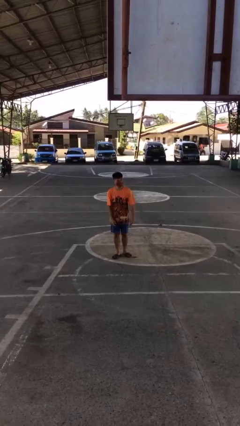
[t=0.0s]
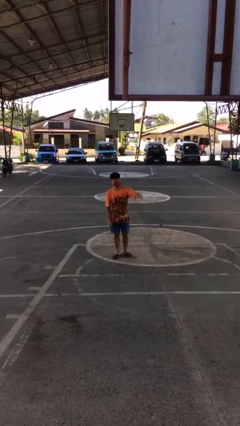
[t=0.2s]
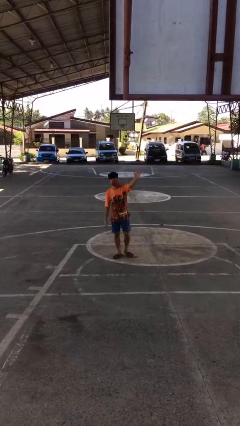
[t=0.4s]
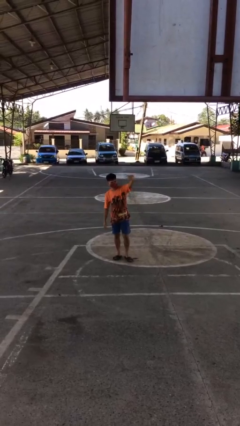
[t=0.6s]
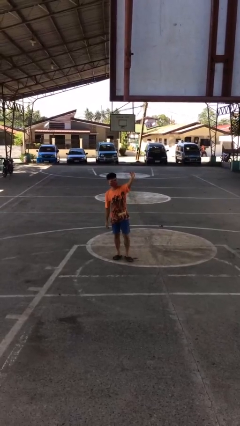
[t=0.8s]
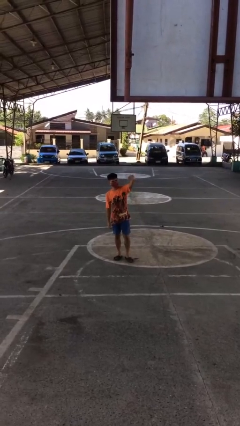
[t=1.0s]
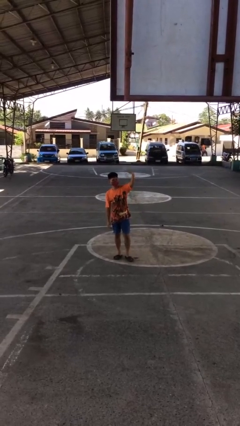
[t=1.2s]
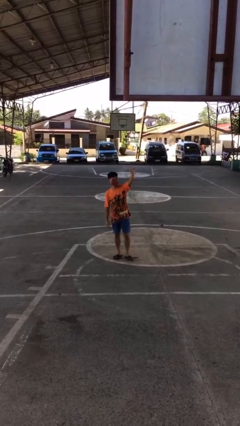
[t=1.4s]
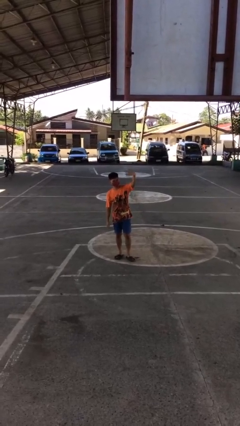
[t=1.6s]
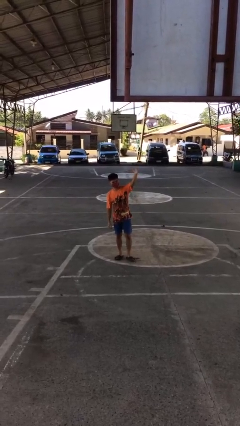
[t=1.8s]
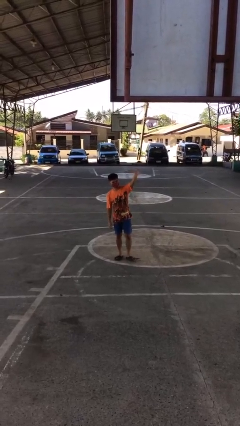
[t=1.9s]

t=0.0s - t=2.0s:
person gestures come here

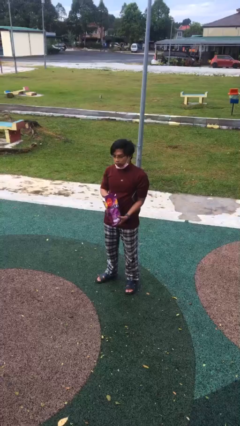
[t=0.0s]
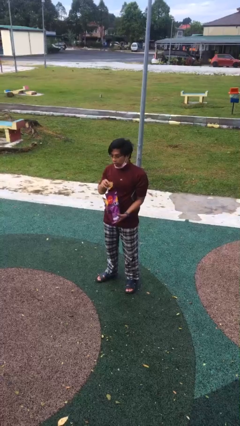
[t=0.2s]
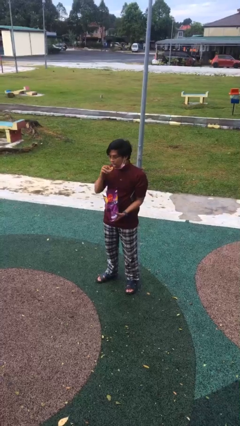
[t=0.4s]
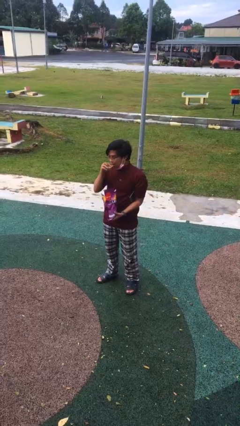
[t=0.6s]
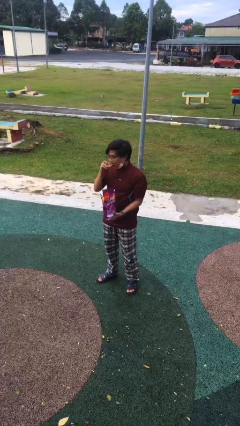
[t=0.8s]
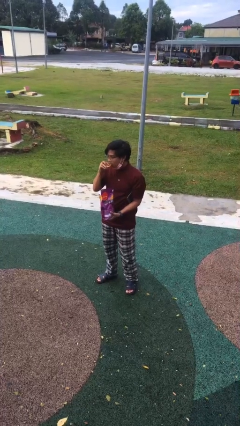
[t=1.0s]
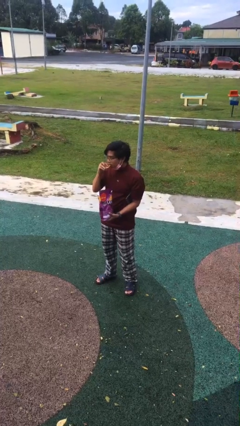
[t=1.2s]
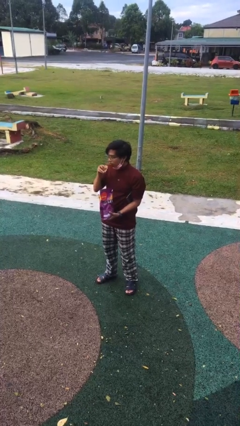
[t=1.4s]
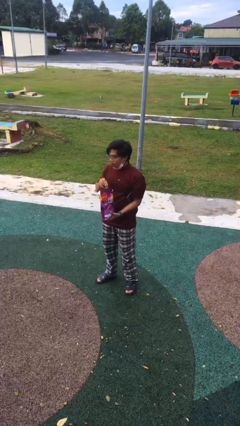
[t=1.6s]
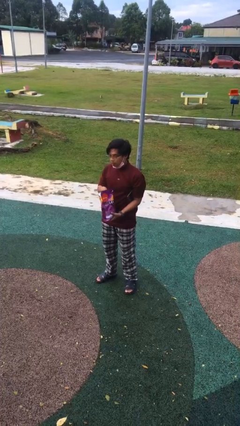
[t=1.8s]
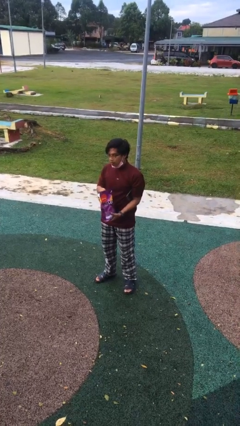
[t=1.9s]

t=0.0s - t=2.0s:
person eats snack from bag

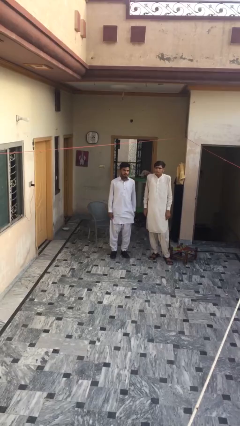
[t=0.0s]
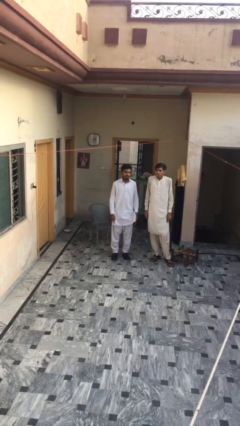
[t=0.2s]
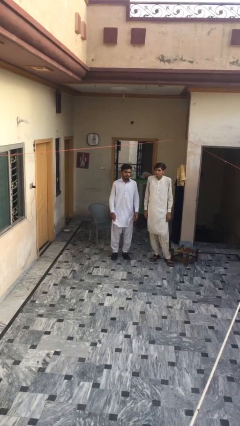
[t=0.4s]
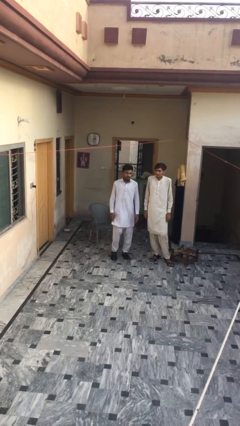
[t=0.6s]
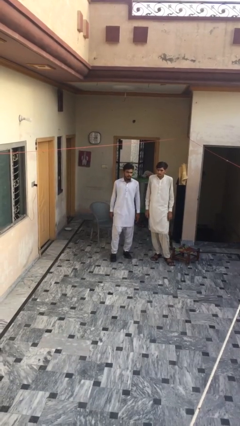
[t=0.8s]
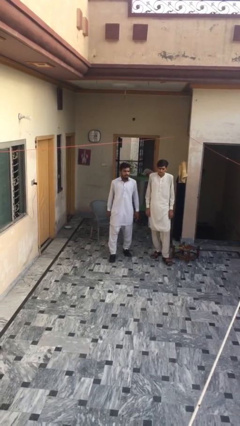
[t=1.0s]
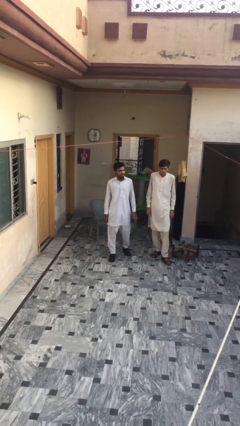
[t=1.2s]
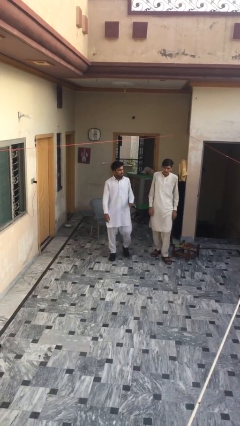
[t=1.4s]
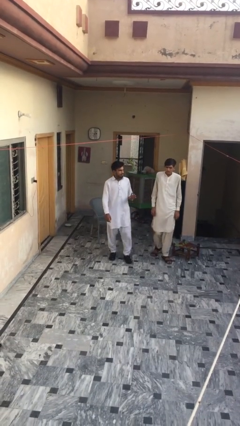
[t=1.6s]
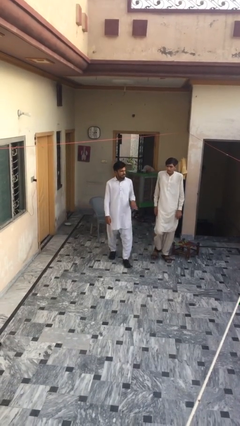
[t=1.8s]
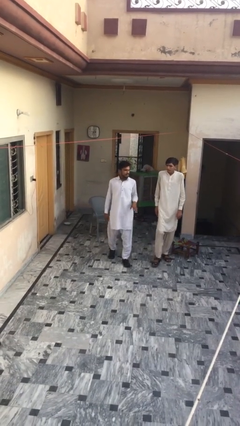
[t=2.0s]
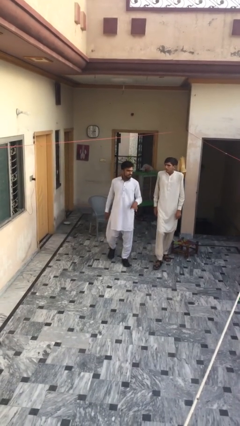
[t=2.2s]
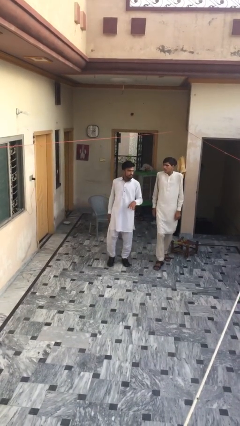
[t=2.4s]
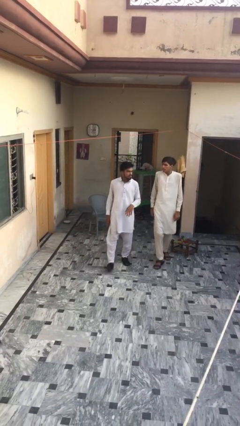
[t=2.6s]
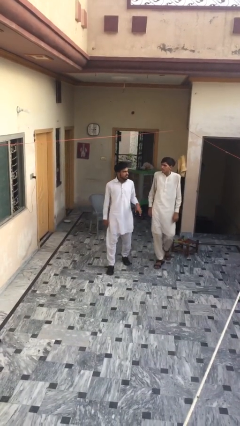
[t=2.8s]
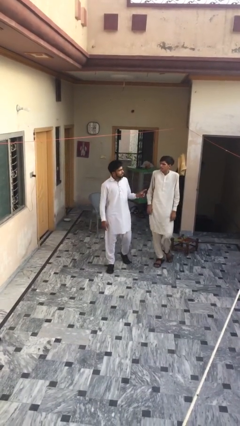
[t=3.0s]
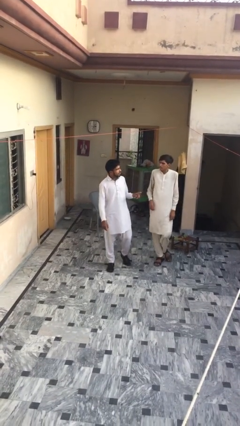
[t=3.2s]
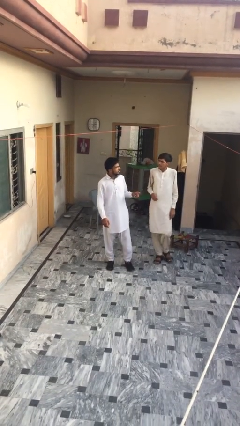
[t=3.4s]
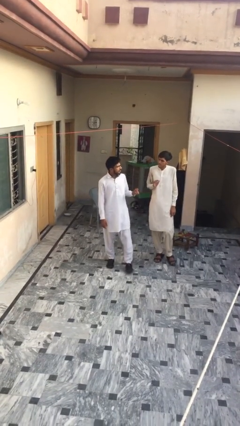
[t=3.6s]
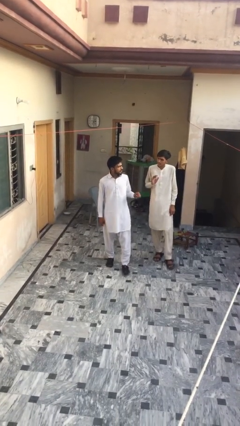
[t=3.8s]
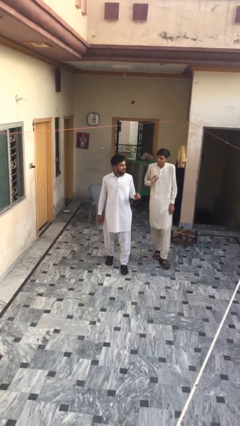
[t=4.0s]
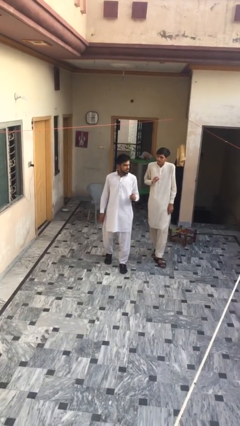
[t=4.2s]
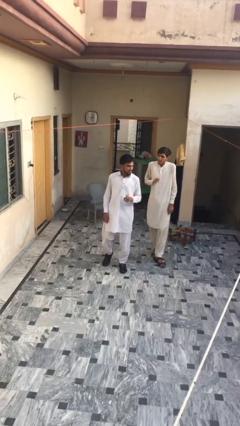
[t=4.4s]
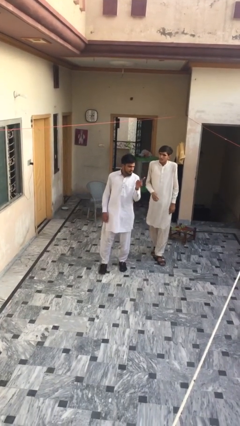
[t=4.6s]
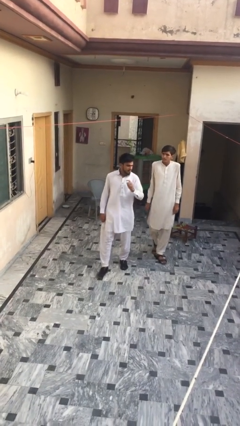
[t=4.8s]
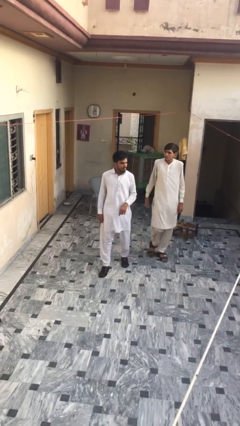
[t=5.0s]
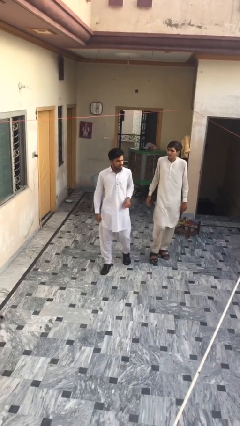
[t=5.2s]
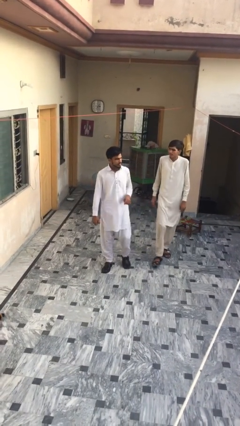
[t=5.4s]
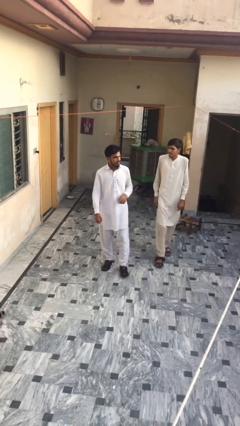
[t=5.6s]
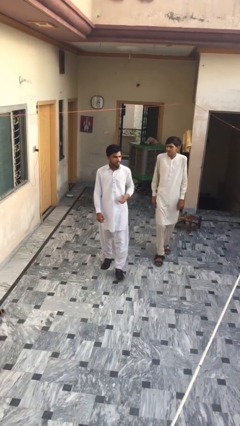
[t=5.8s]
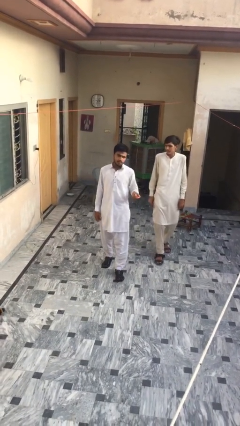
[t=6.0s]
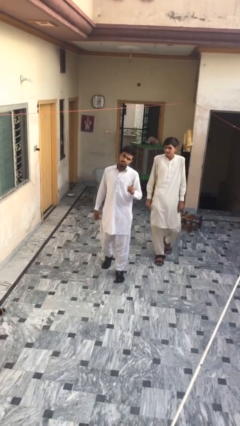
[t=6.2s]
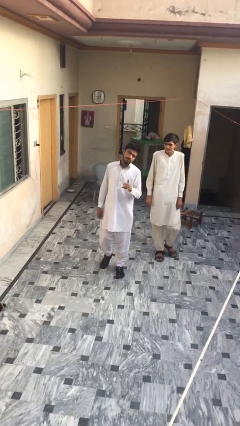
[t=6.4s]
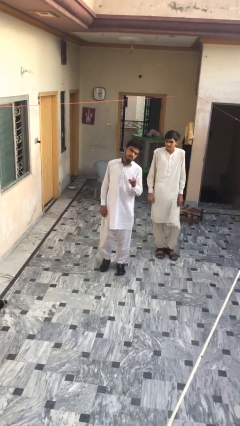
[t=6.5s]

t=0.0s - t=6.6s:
person talks to person

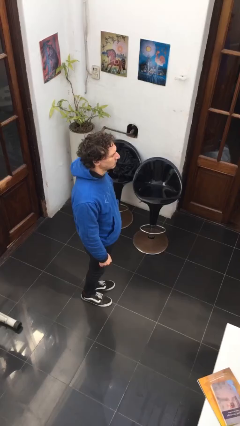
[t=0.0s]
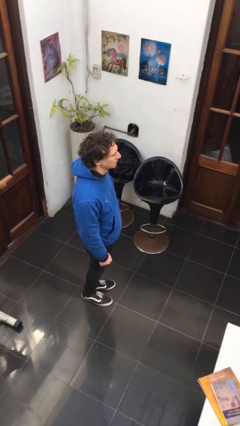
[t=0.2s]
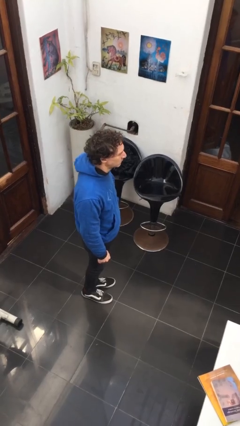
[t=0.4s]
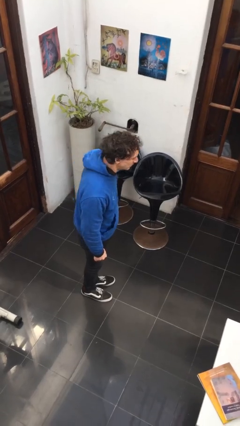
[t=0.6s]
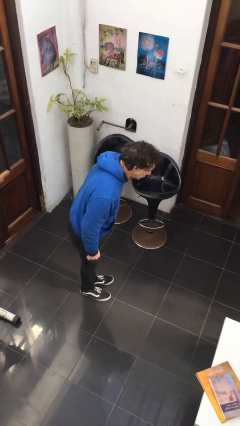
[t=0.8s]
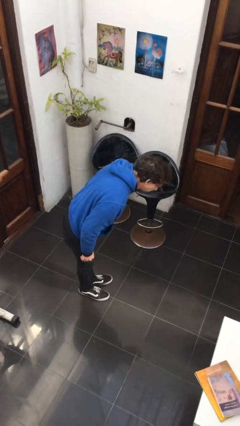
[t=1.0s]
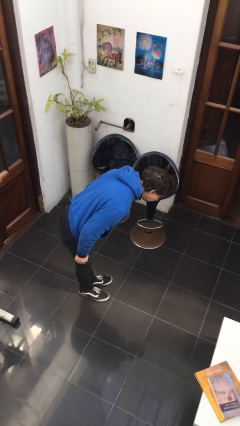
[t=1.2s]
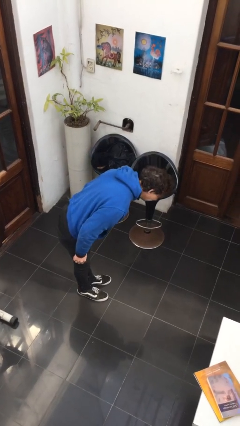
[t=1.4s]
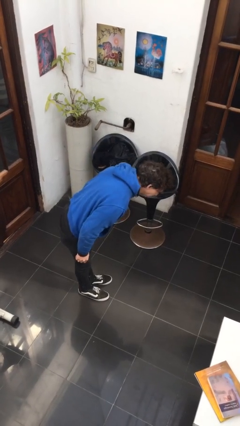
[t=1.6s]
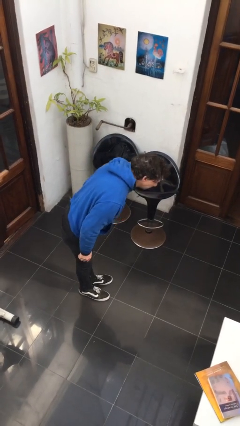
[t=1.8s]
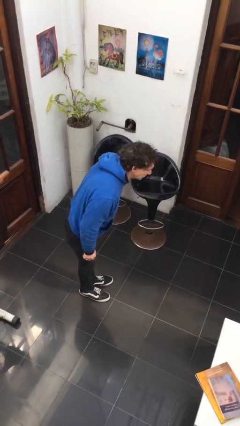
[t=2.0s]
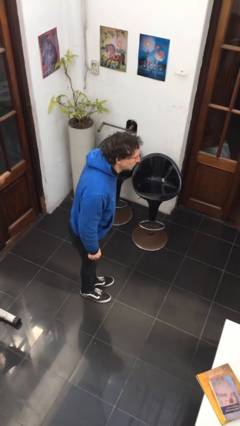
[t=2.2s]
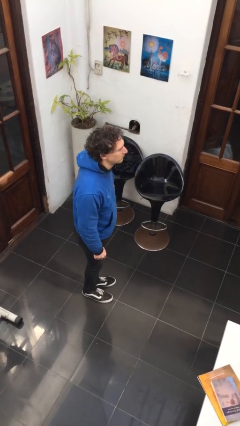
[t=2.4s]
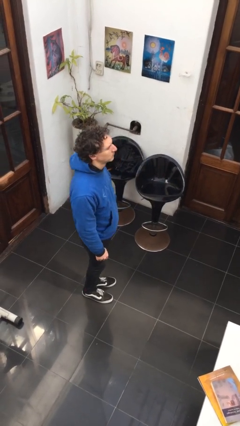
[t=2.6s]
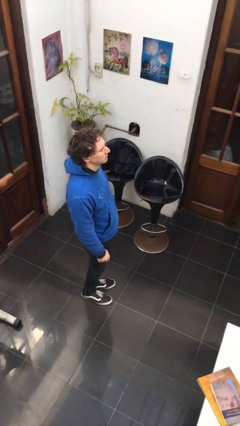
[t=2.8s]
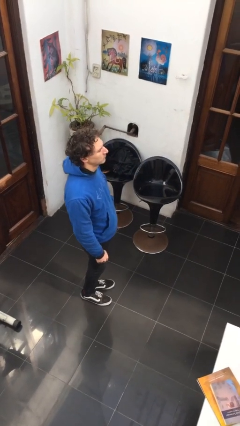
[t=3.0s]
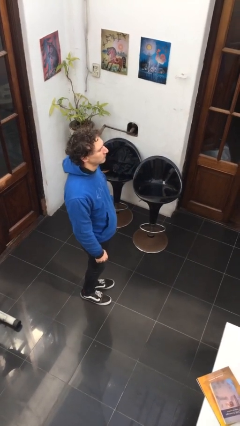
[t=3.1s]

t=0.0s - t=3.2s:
person bows

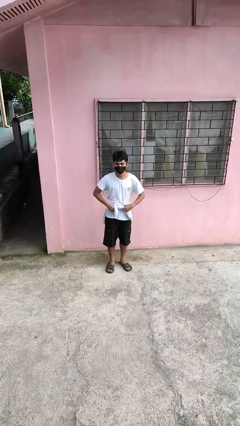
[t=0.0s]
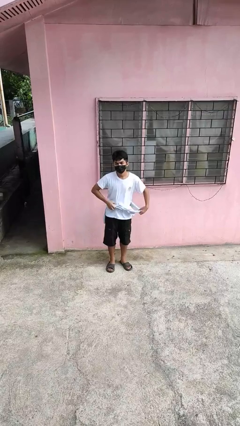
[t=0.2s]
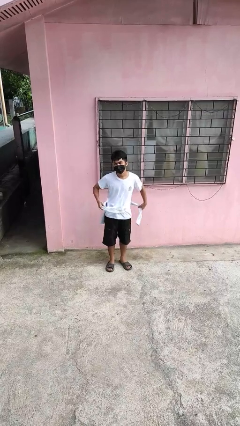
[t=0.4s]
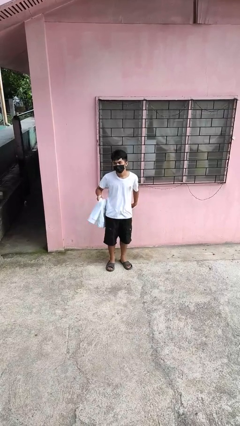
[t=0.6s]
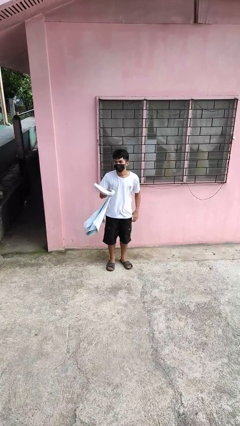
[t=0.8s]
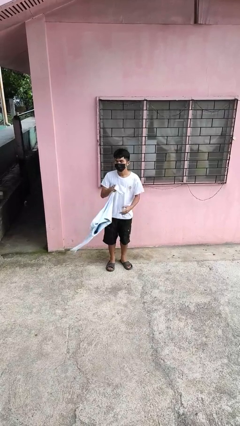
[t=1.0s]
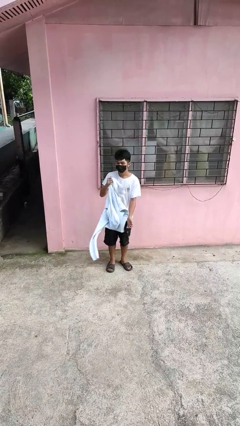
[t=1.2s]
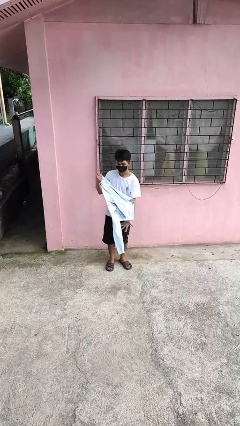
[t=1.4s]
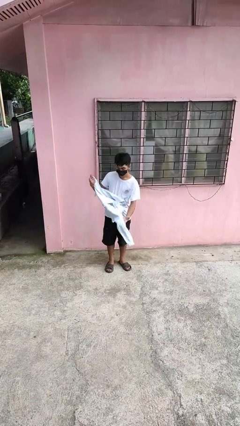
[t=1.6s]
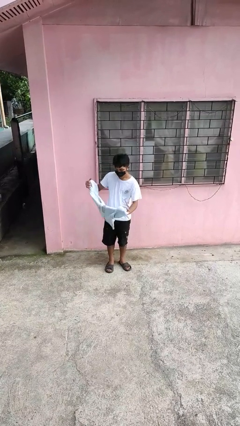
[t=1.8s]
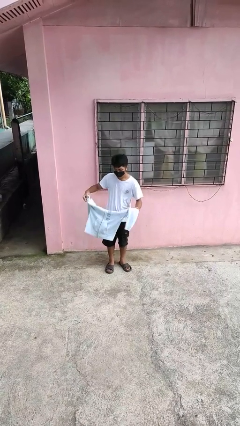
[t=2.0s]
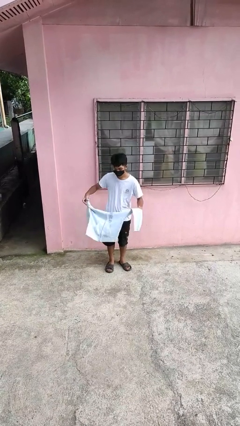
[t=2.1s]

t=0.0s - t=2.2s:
person unties jacket around waist

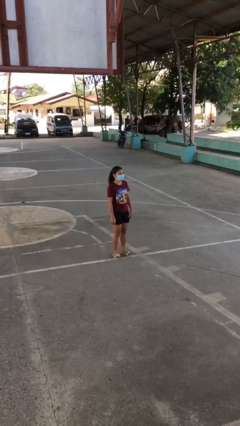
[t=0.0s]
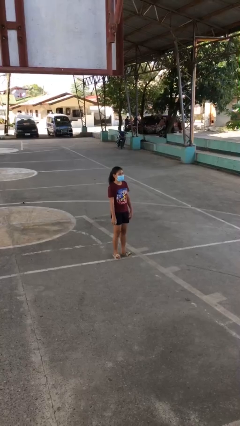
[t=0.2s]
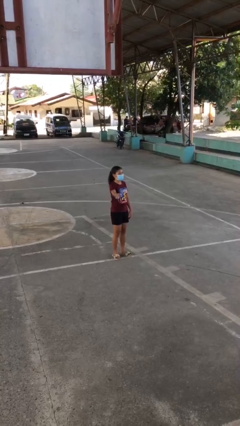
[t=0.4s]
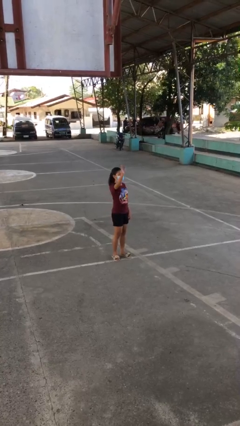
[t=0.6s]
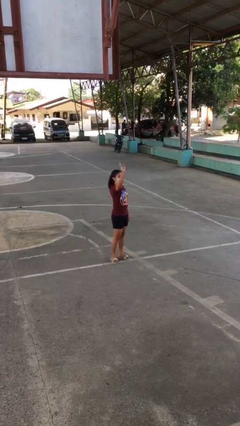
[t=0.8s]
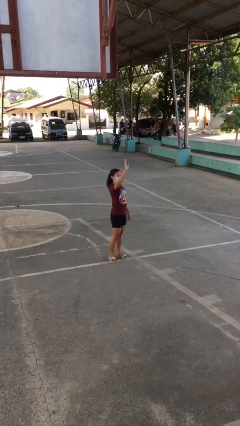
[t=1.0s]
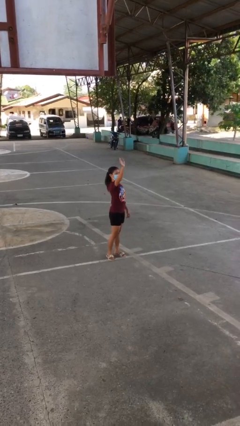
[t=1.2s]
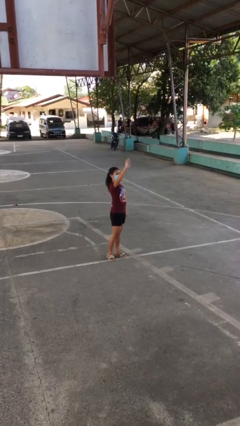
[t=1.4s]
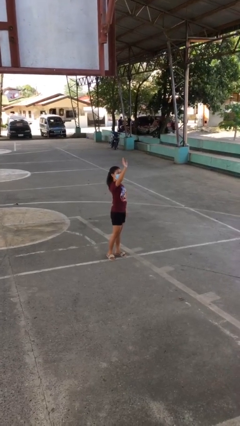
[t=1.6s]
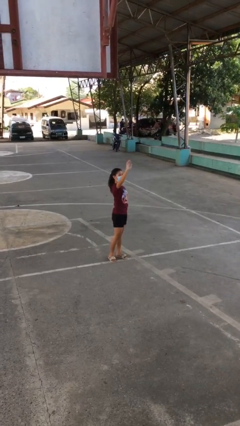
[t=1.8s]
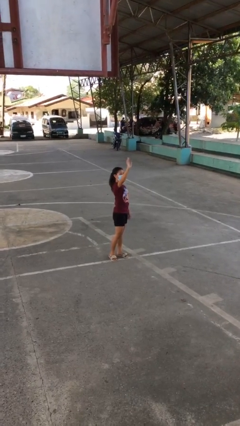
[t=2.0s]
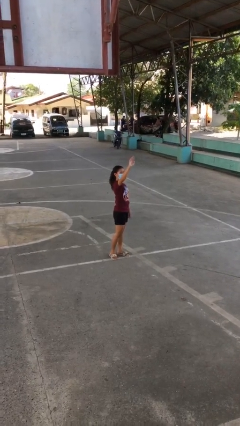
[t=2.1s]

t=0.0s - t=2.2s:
person waves at person
